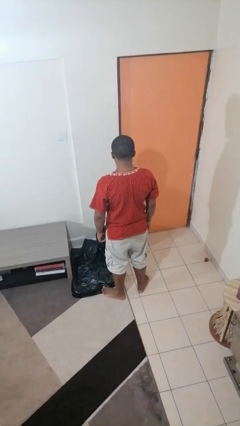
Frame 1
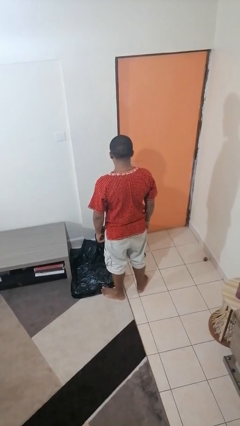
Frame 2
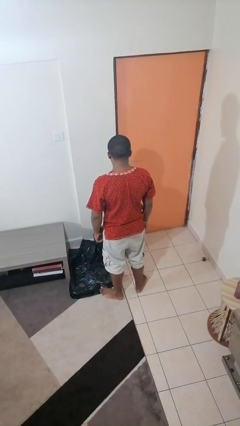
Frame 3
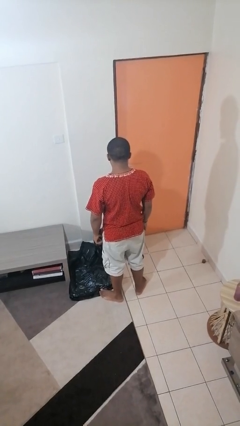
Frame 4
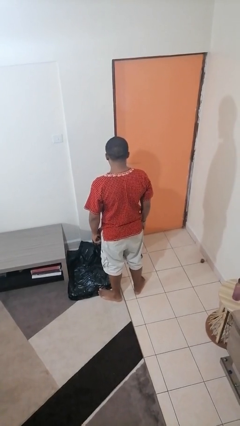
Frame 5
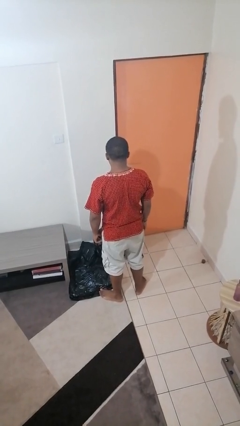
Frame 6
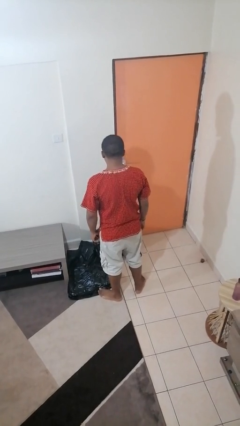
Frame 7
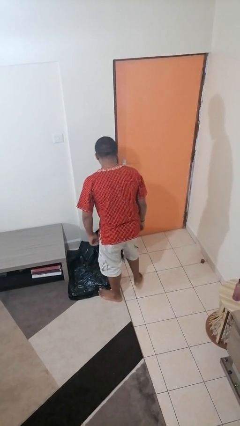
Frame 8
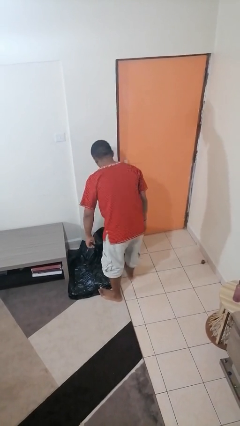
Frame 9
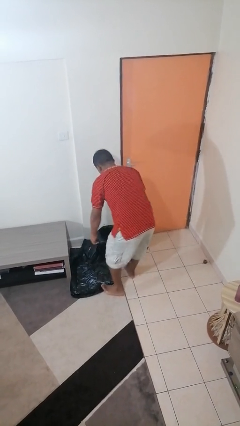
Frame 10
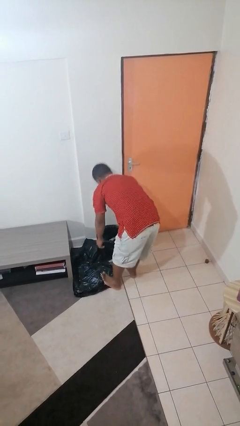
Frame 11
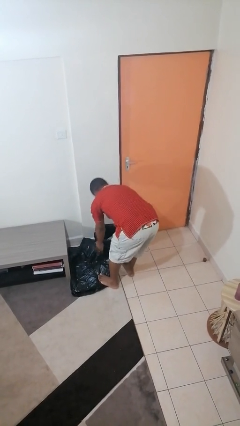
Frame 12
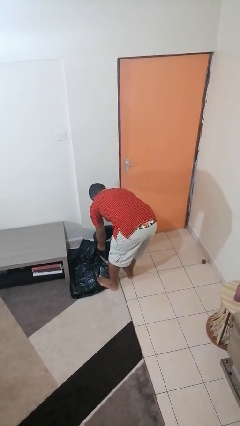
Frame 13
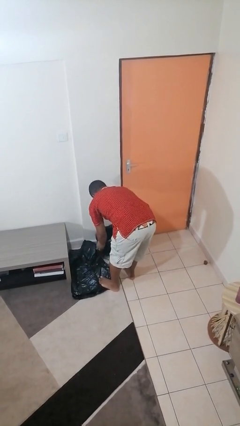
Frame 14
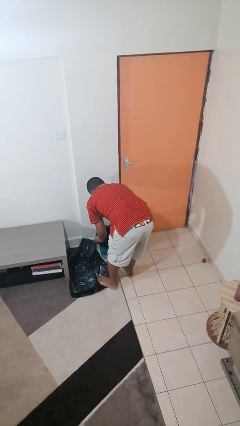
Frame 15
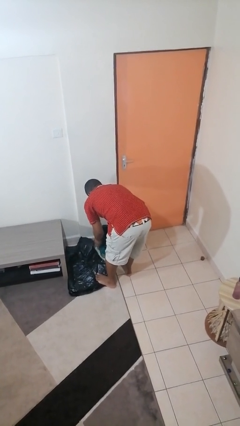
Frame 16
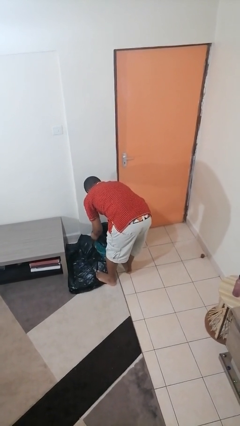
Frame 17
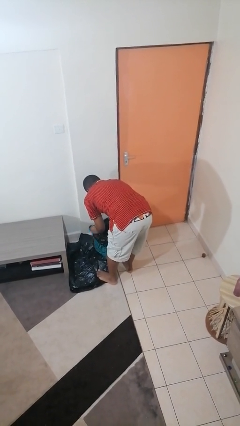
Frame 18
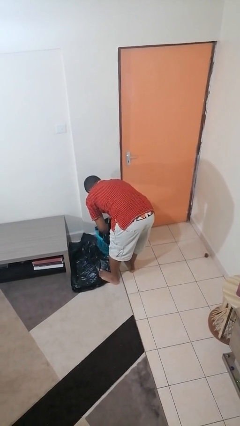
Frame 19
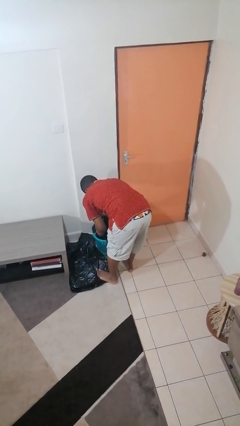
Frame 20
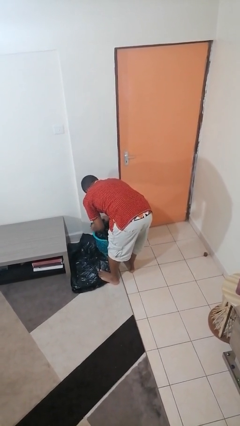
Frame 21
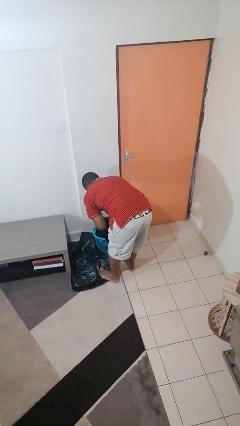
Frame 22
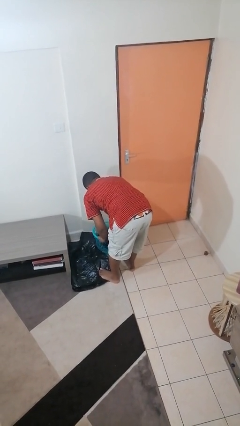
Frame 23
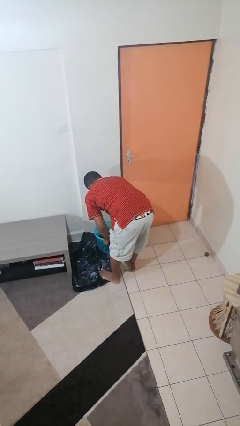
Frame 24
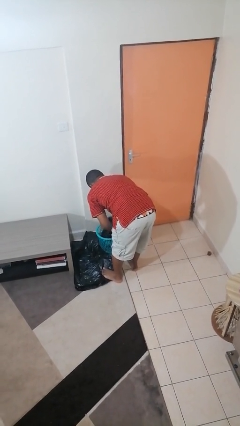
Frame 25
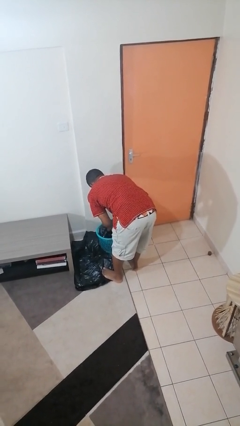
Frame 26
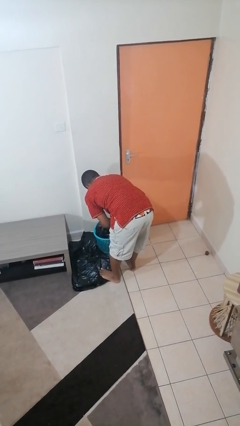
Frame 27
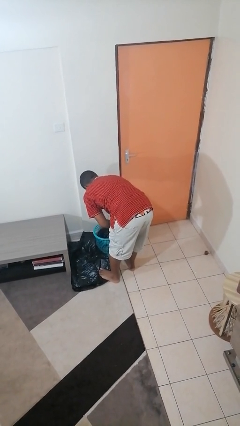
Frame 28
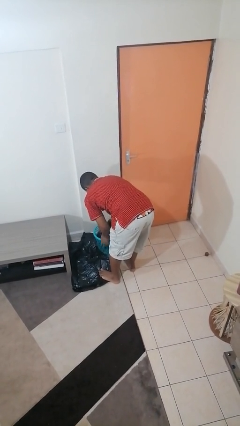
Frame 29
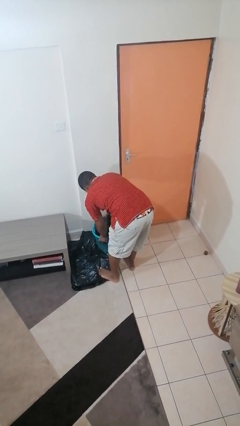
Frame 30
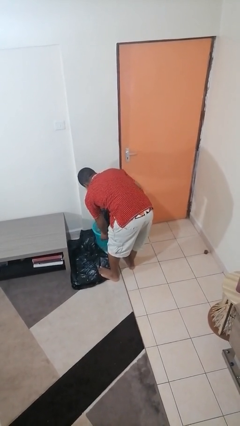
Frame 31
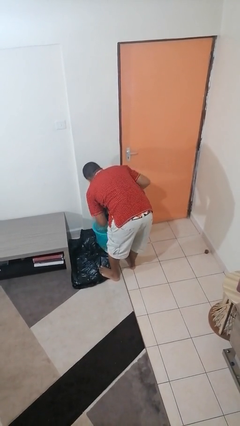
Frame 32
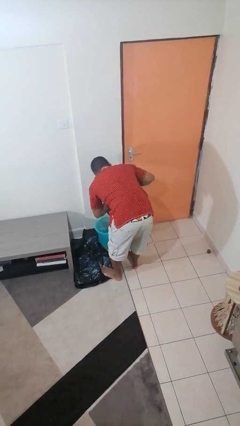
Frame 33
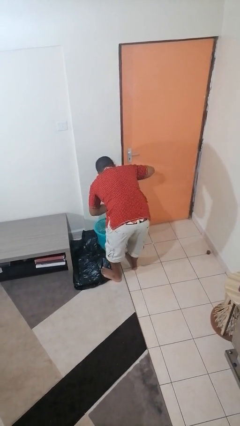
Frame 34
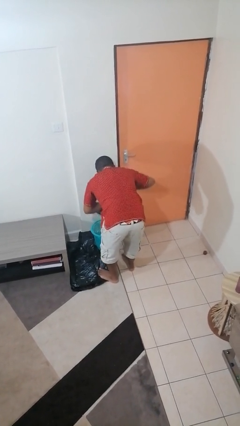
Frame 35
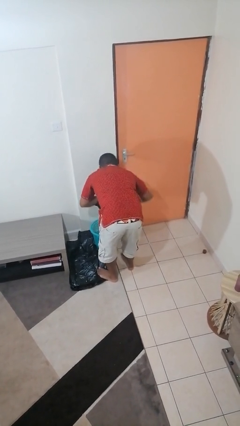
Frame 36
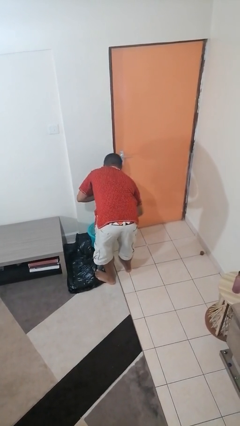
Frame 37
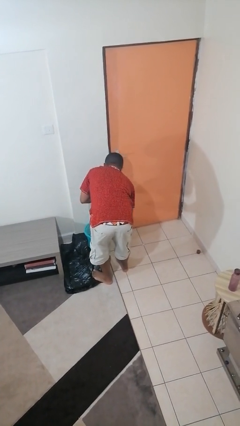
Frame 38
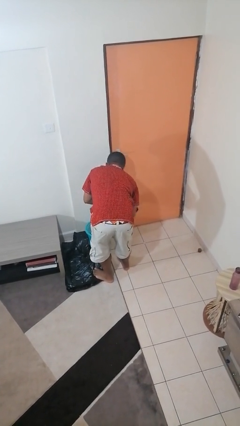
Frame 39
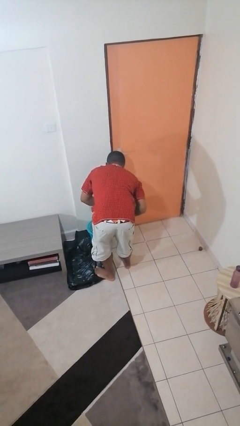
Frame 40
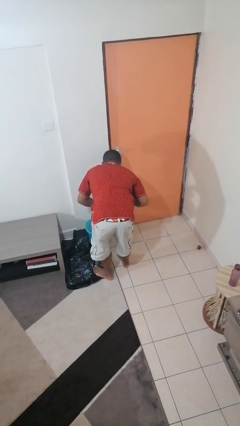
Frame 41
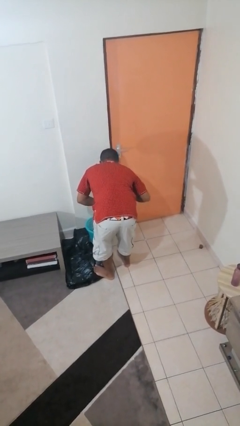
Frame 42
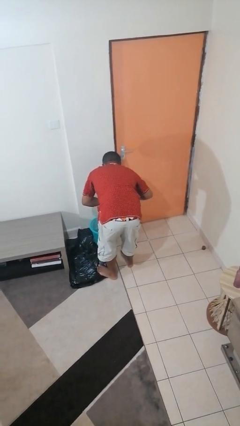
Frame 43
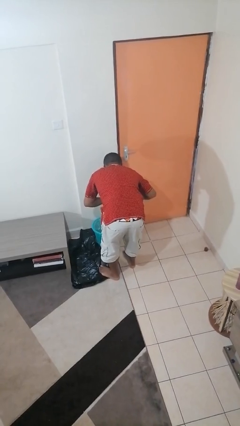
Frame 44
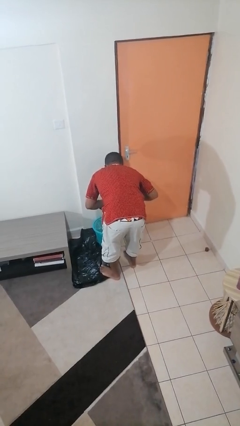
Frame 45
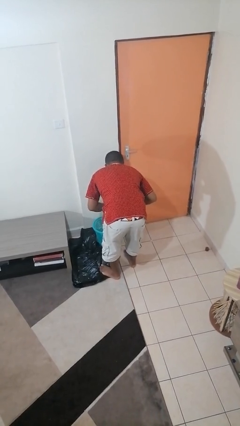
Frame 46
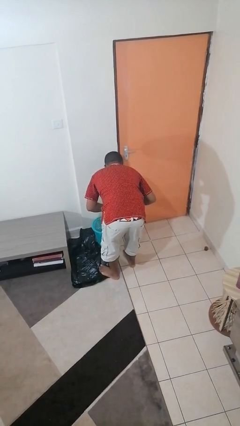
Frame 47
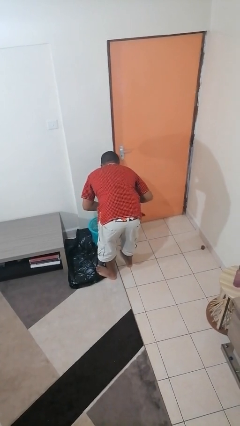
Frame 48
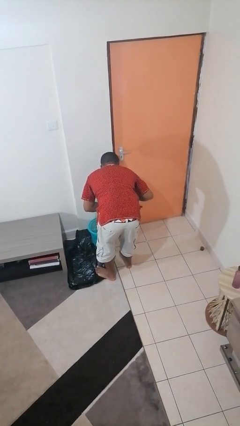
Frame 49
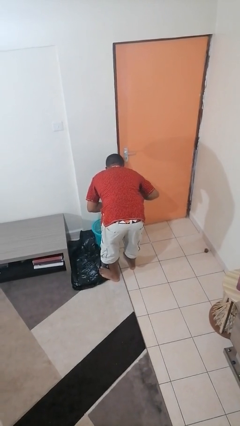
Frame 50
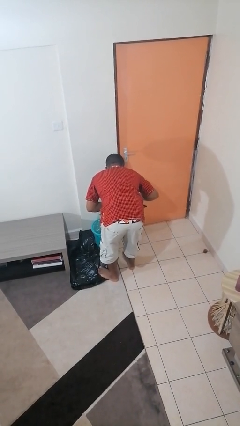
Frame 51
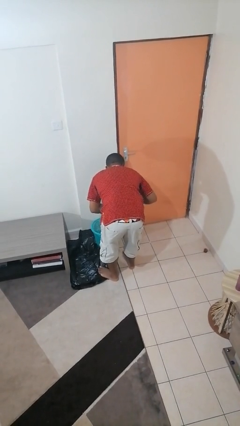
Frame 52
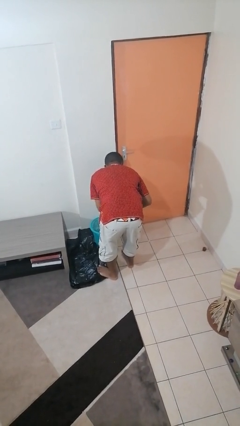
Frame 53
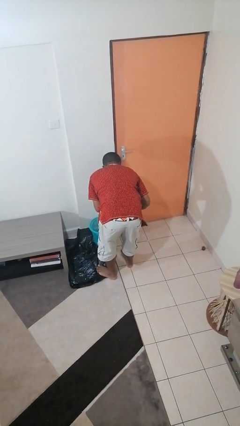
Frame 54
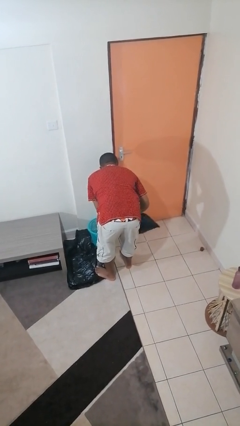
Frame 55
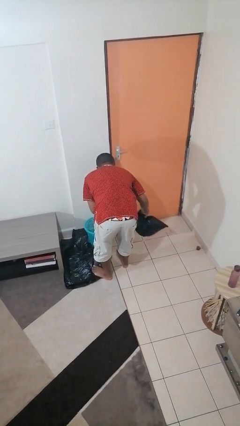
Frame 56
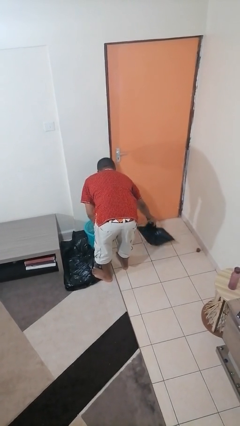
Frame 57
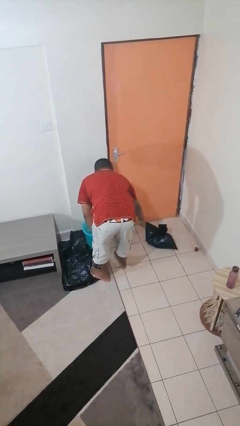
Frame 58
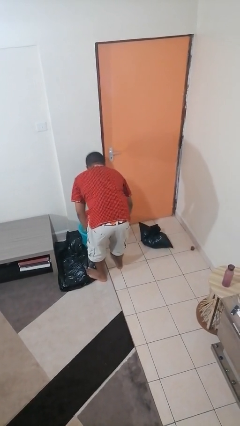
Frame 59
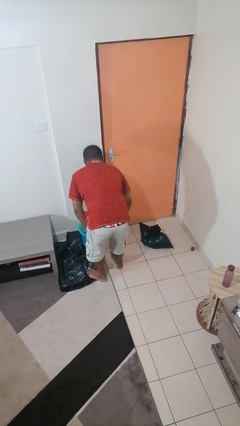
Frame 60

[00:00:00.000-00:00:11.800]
person removes trashbag from trashcan

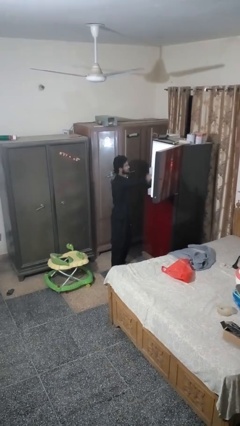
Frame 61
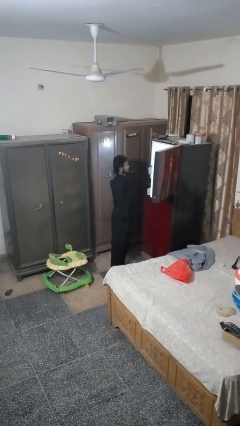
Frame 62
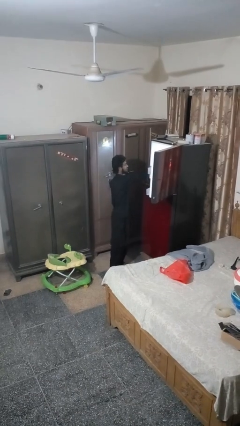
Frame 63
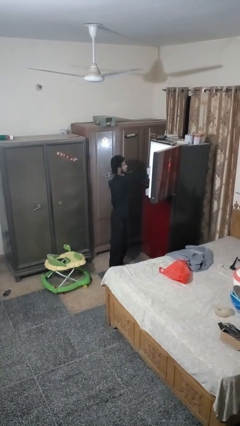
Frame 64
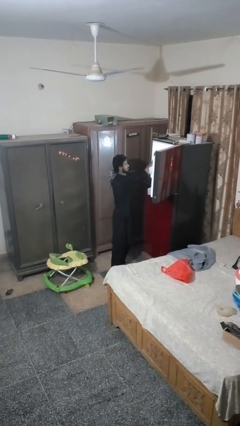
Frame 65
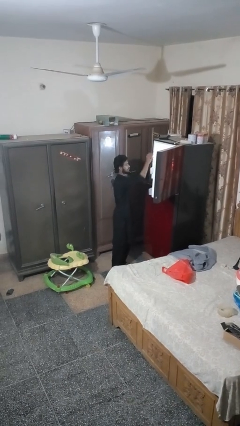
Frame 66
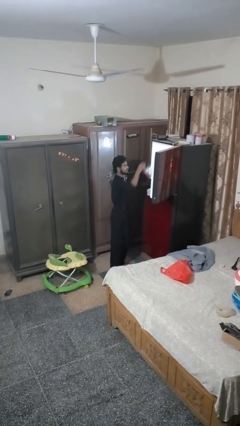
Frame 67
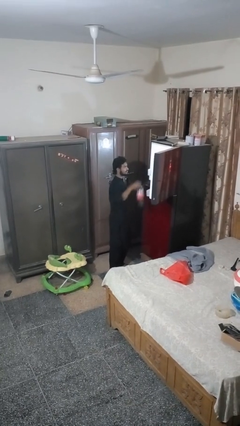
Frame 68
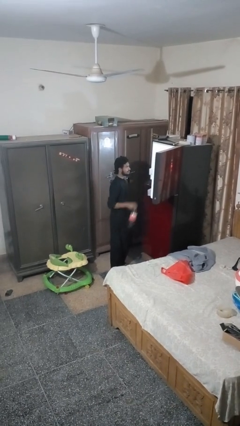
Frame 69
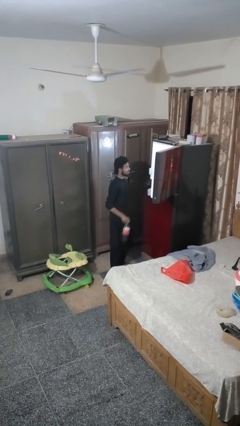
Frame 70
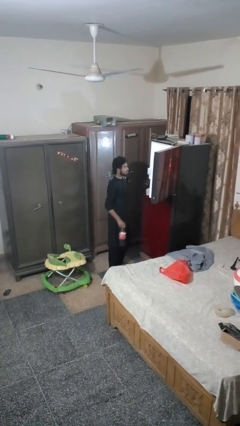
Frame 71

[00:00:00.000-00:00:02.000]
person takes object from refrigerator

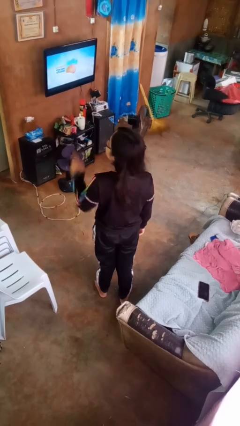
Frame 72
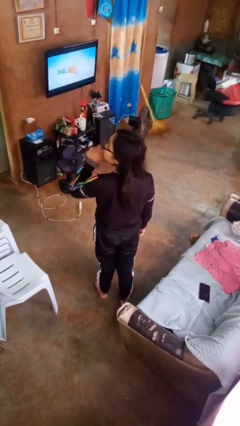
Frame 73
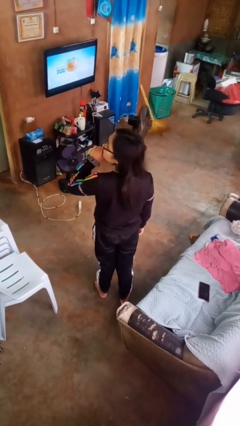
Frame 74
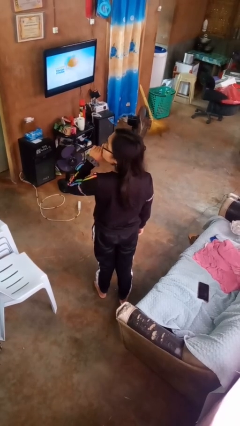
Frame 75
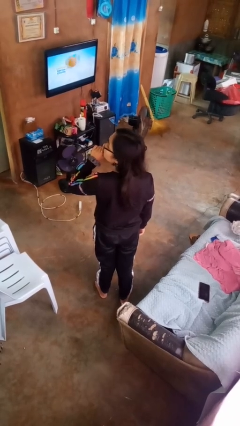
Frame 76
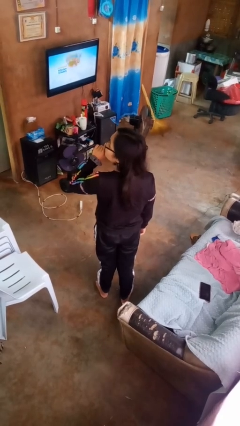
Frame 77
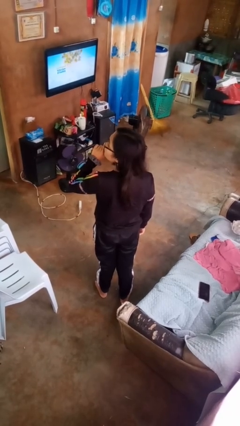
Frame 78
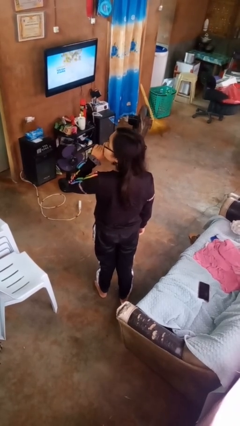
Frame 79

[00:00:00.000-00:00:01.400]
person gestures be quiet

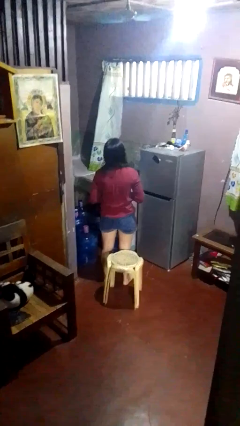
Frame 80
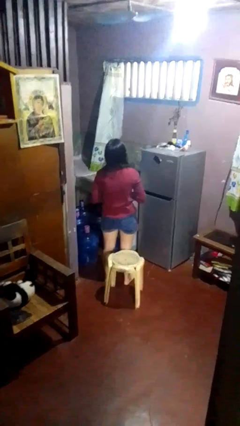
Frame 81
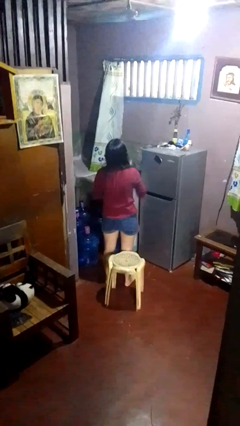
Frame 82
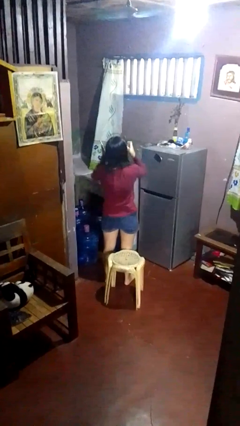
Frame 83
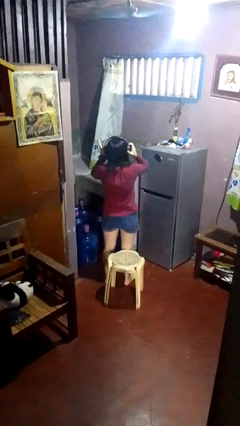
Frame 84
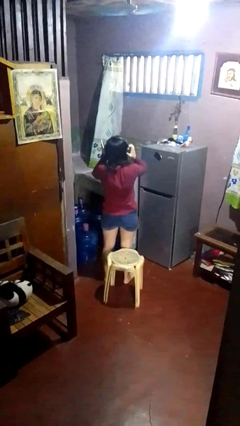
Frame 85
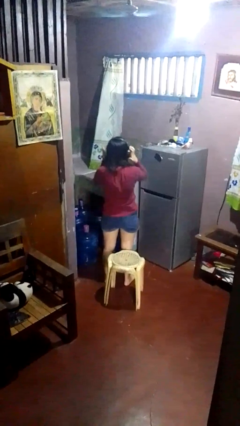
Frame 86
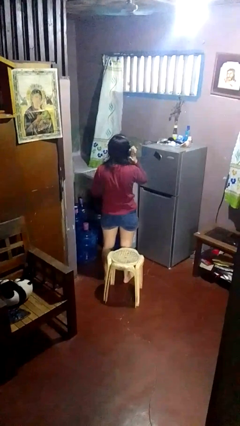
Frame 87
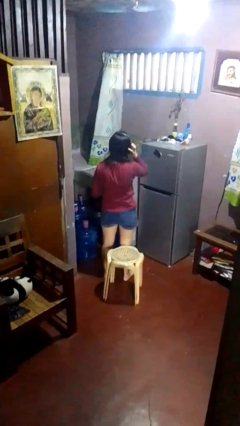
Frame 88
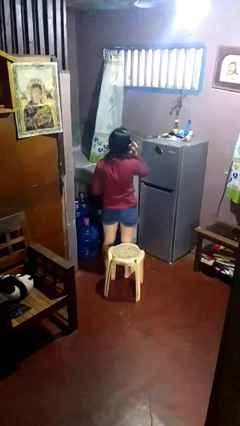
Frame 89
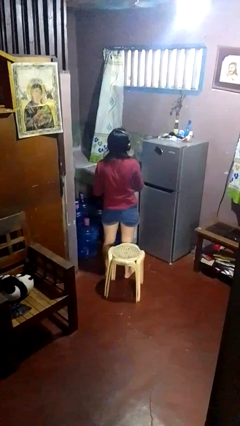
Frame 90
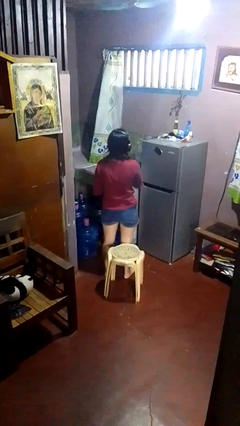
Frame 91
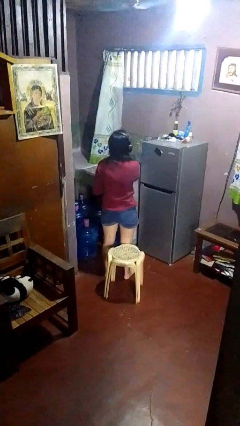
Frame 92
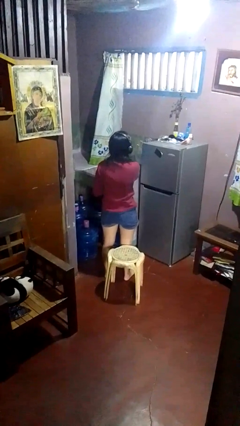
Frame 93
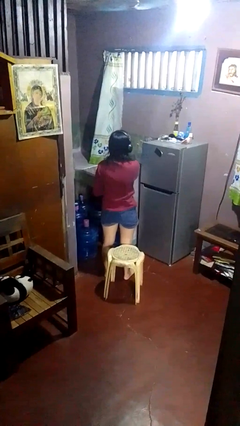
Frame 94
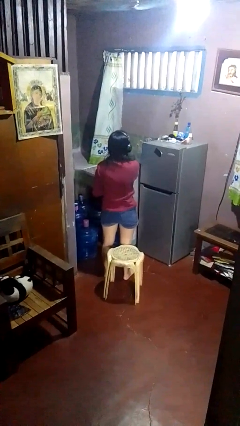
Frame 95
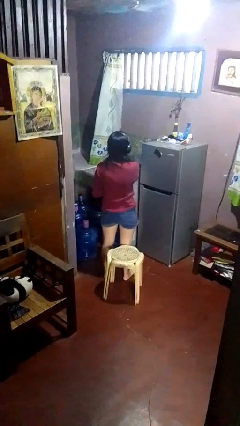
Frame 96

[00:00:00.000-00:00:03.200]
person puts on headphones
